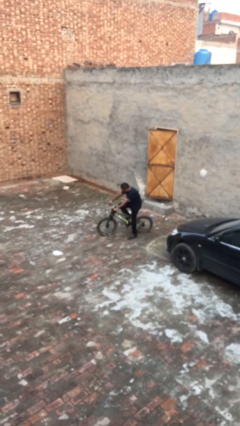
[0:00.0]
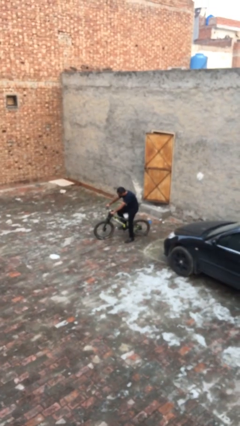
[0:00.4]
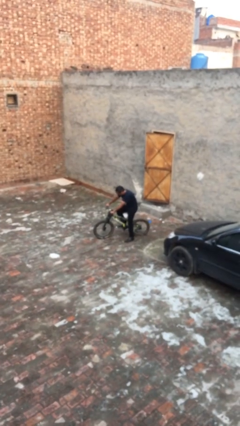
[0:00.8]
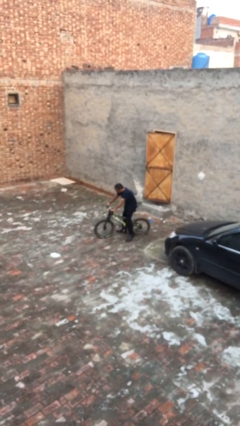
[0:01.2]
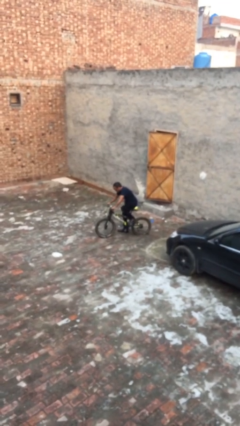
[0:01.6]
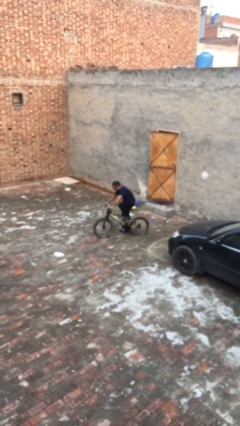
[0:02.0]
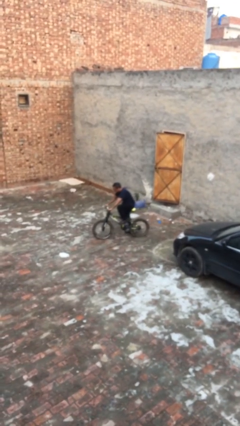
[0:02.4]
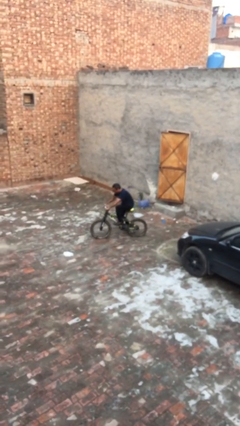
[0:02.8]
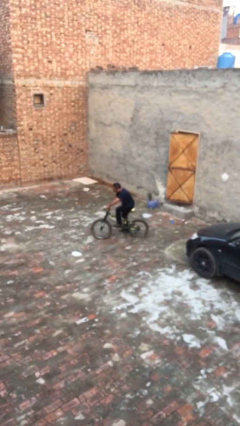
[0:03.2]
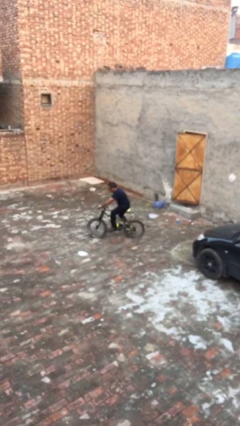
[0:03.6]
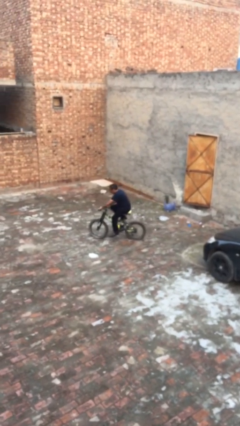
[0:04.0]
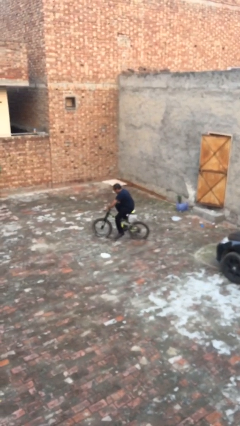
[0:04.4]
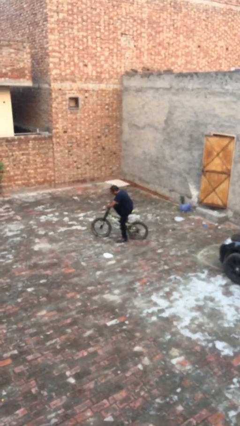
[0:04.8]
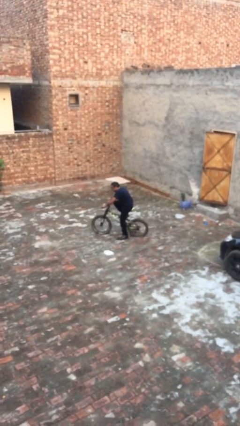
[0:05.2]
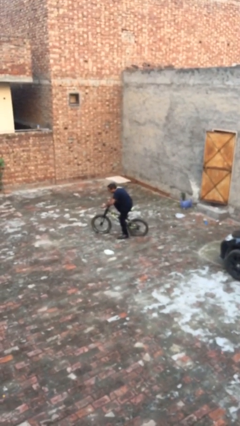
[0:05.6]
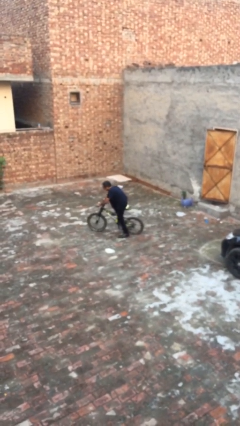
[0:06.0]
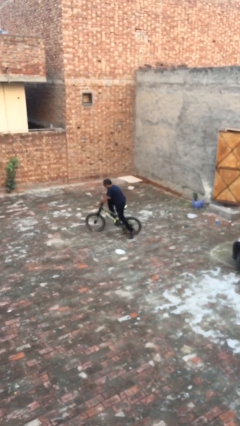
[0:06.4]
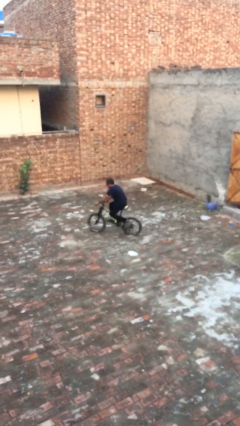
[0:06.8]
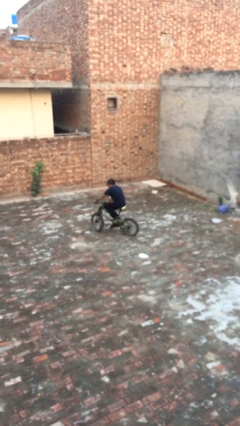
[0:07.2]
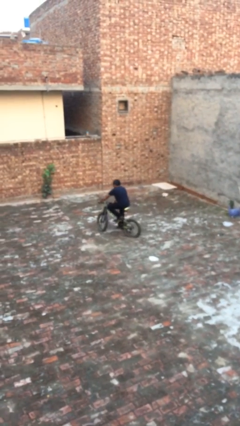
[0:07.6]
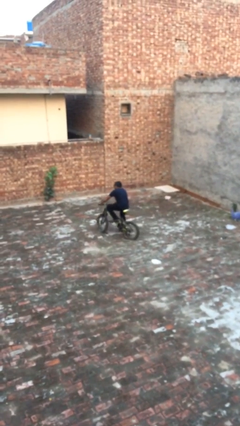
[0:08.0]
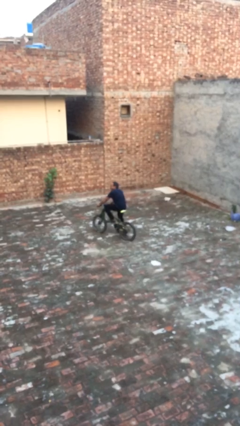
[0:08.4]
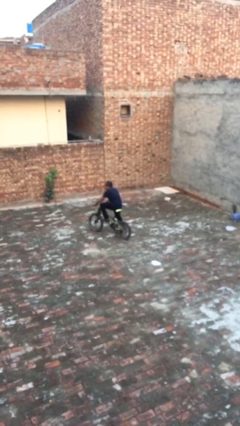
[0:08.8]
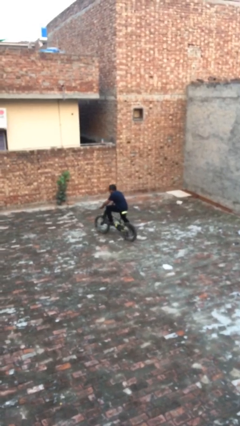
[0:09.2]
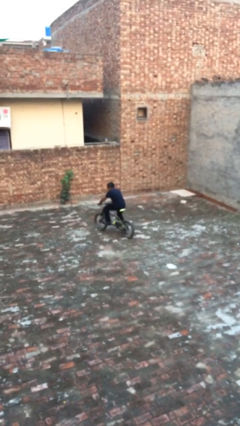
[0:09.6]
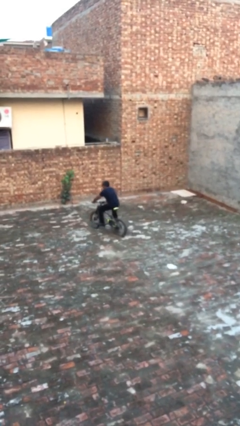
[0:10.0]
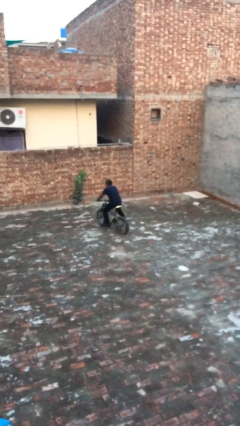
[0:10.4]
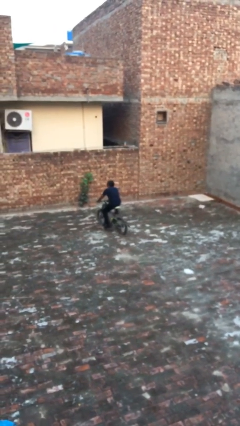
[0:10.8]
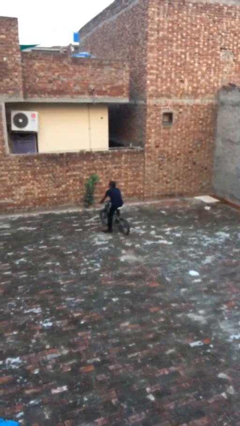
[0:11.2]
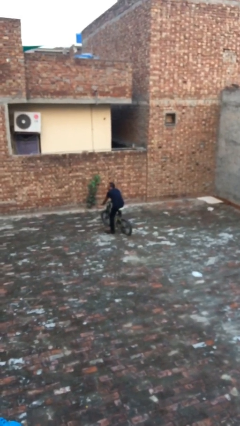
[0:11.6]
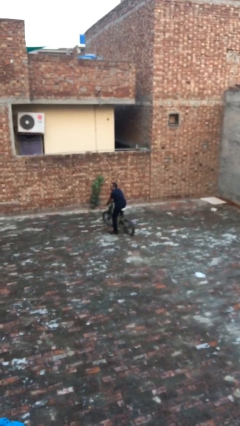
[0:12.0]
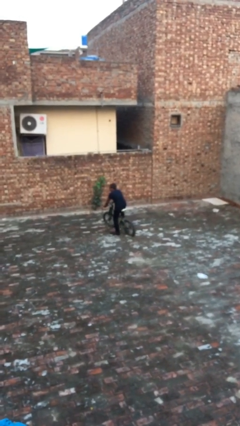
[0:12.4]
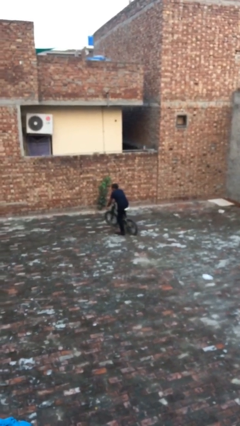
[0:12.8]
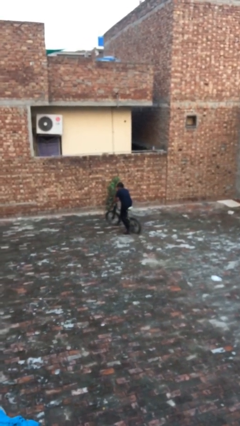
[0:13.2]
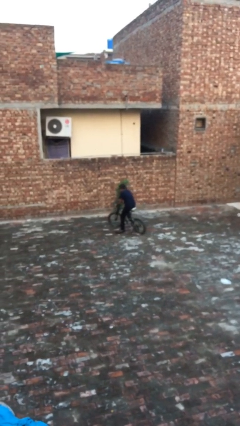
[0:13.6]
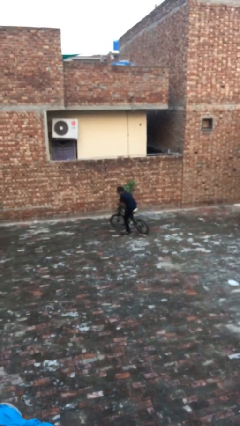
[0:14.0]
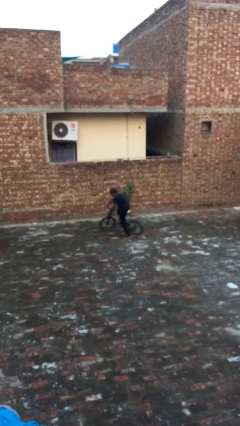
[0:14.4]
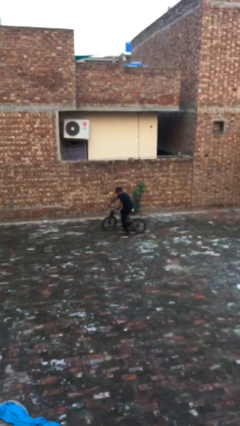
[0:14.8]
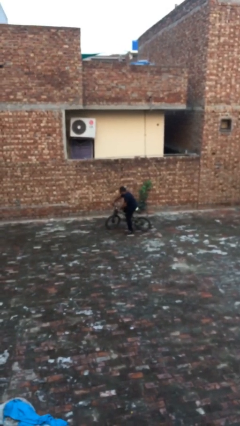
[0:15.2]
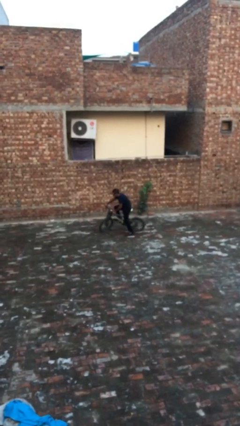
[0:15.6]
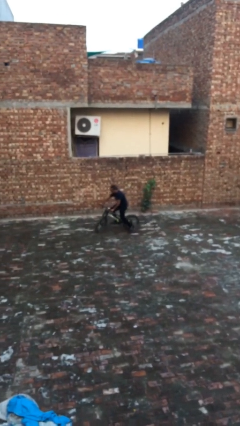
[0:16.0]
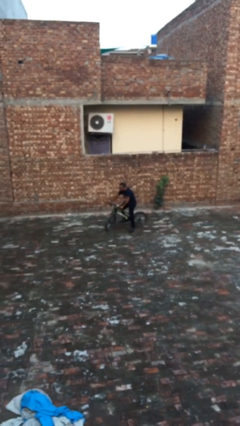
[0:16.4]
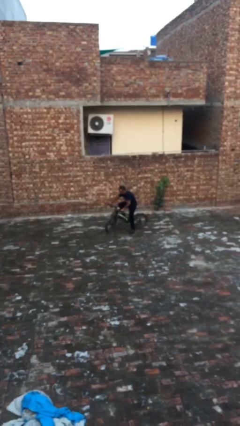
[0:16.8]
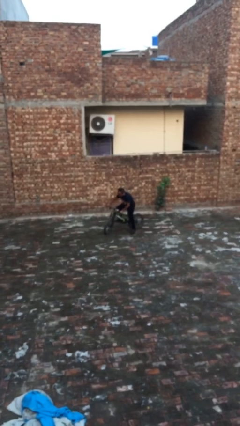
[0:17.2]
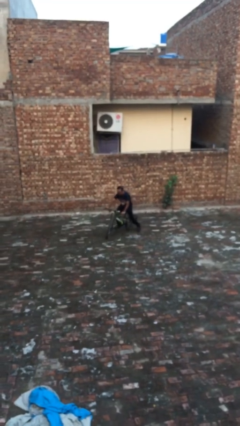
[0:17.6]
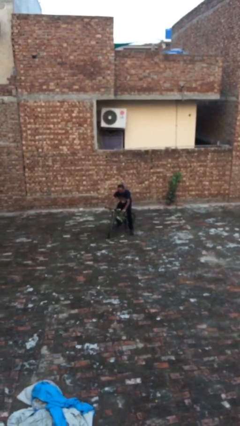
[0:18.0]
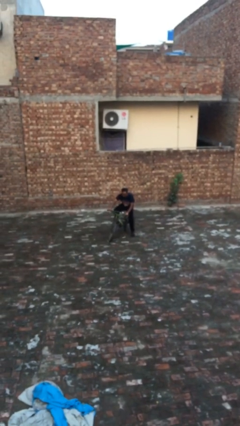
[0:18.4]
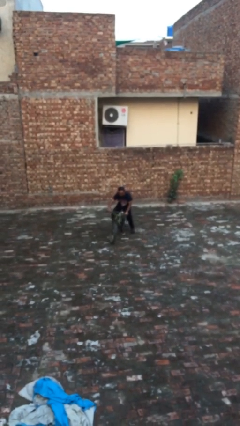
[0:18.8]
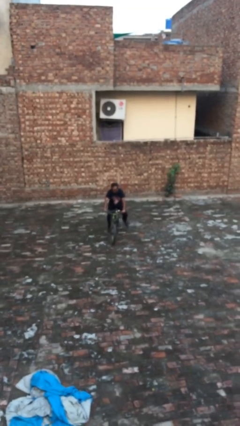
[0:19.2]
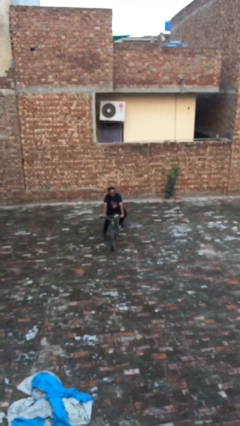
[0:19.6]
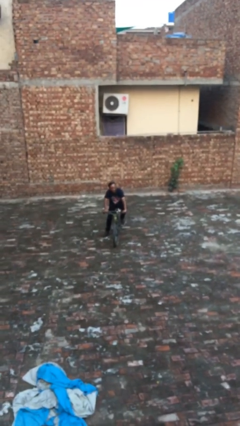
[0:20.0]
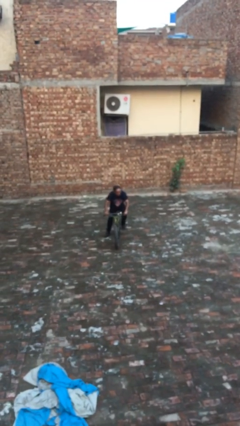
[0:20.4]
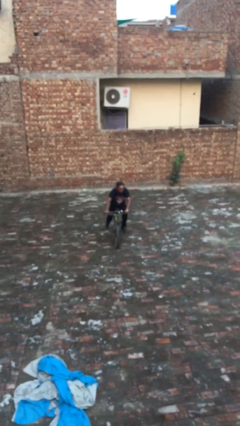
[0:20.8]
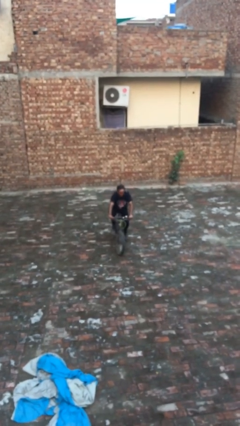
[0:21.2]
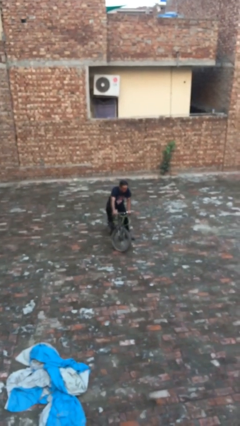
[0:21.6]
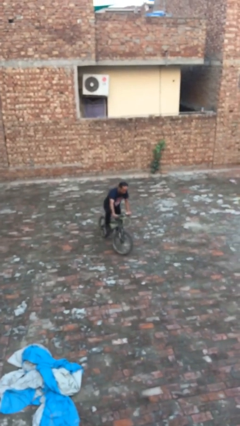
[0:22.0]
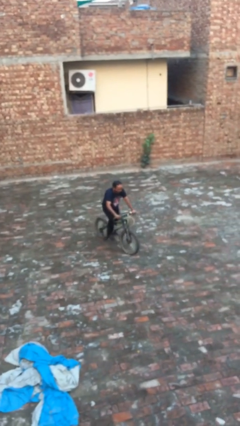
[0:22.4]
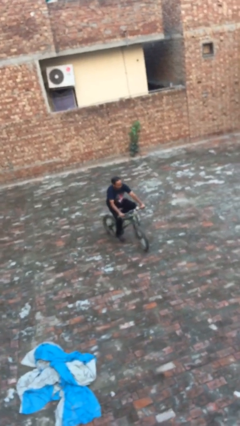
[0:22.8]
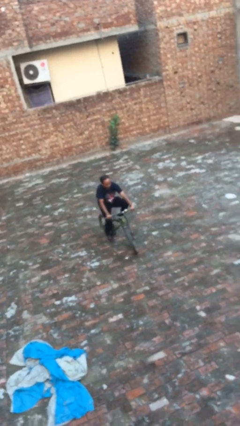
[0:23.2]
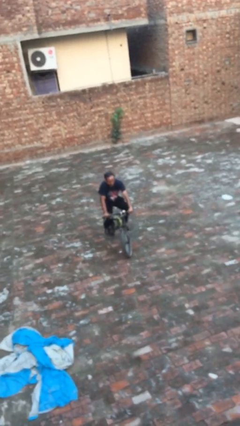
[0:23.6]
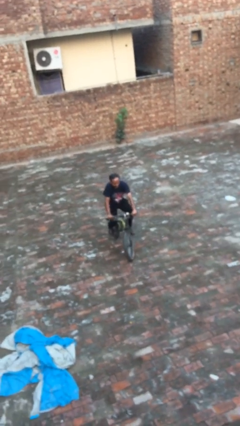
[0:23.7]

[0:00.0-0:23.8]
person rides bicycle

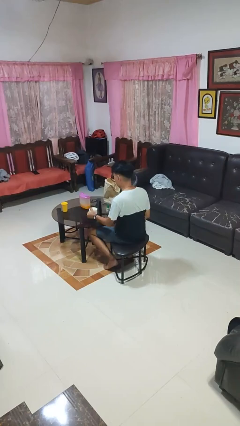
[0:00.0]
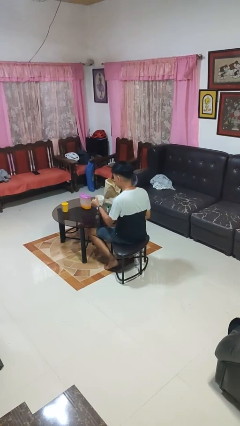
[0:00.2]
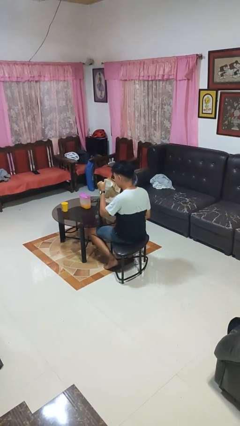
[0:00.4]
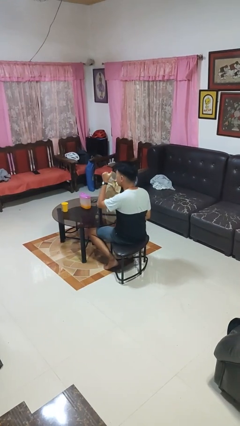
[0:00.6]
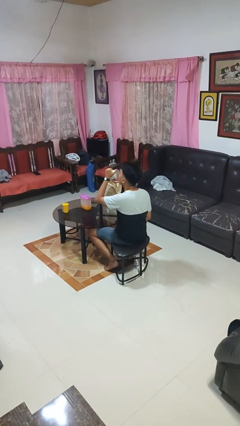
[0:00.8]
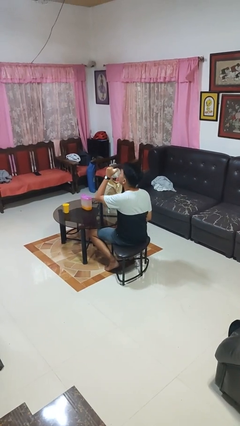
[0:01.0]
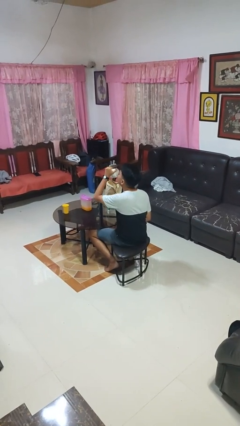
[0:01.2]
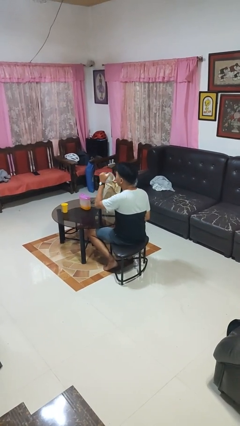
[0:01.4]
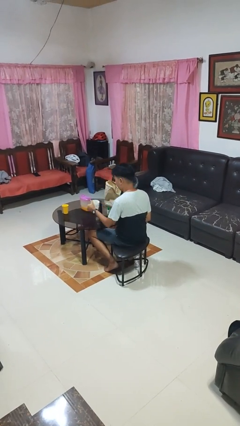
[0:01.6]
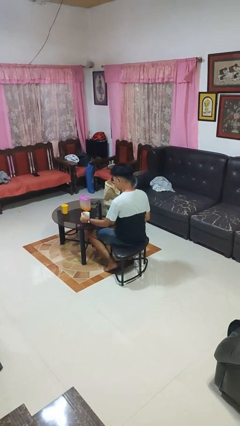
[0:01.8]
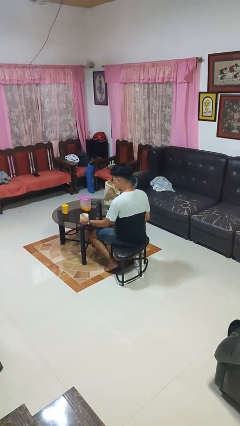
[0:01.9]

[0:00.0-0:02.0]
person drinks from mug

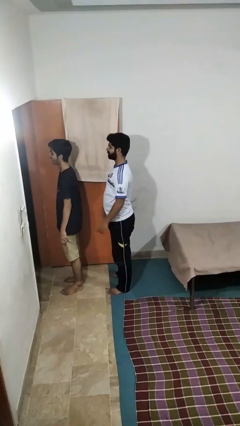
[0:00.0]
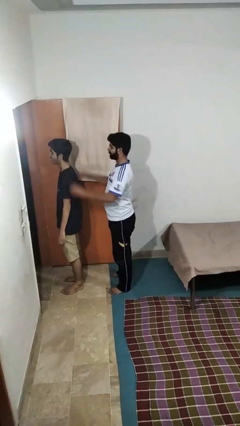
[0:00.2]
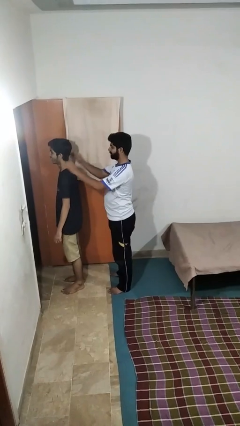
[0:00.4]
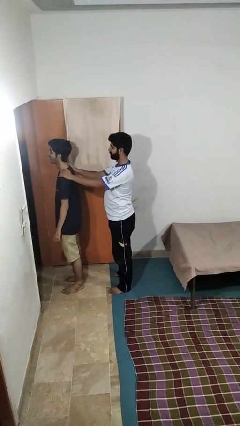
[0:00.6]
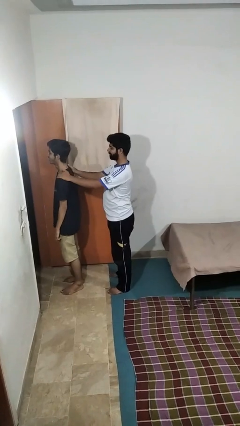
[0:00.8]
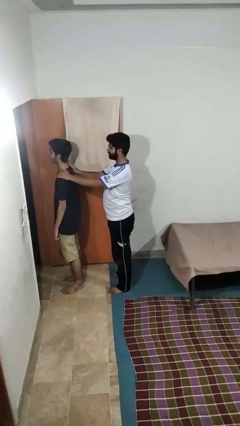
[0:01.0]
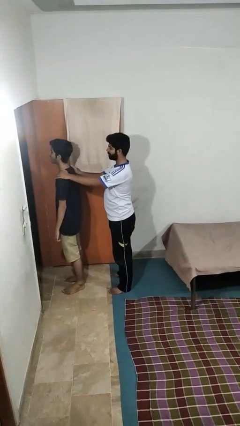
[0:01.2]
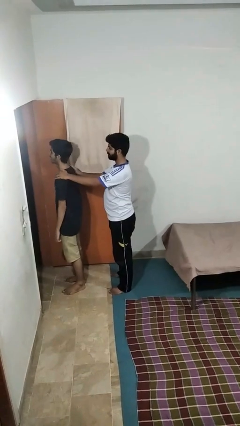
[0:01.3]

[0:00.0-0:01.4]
person grabs person by shoulder

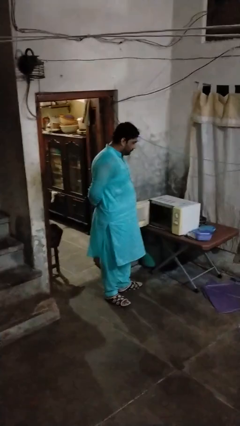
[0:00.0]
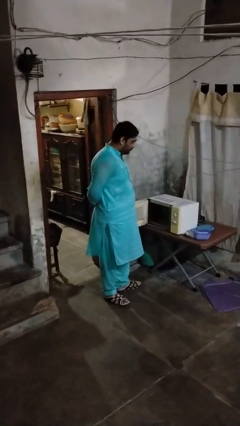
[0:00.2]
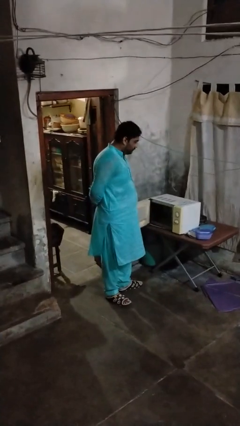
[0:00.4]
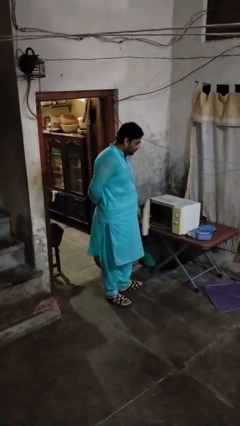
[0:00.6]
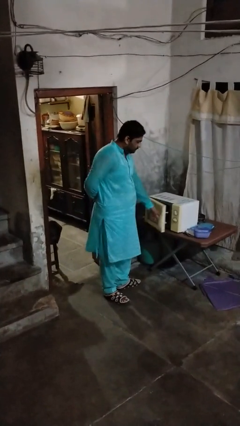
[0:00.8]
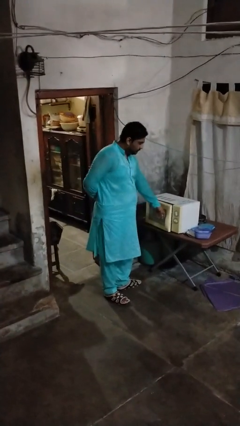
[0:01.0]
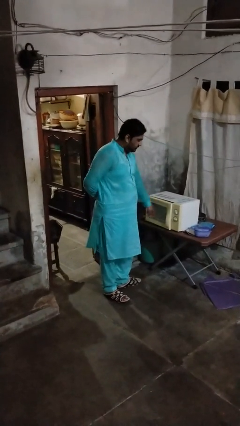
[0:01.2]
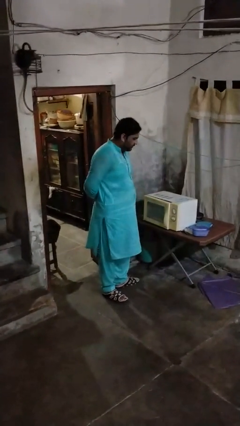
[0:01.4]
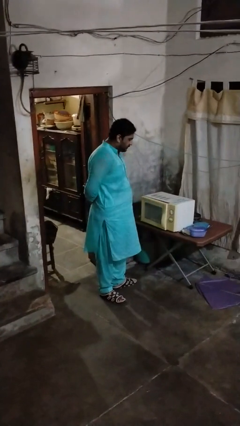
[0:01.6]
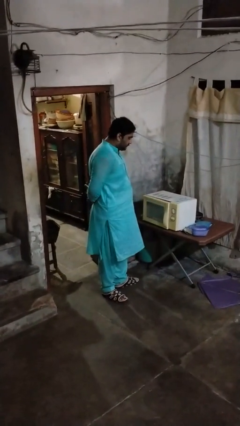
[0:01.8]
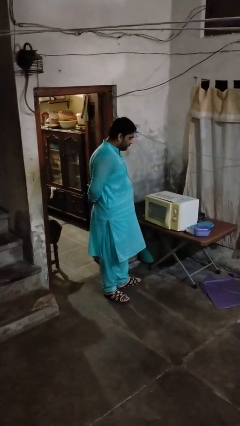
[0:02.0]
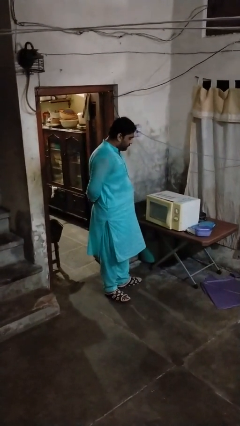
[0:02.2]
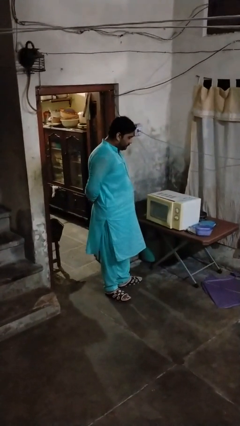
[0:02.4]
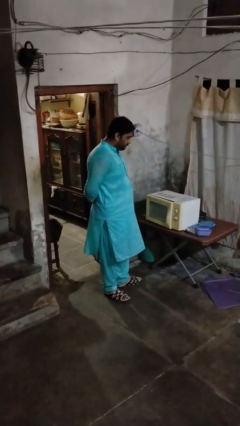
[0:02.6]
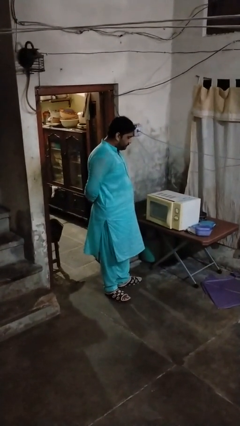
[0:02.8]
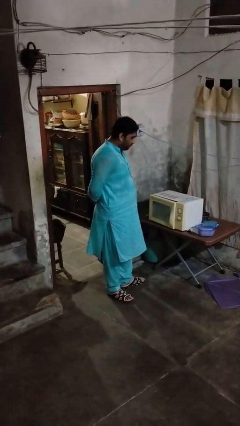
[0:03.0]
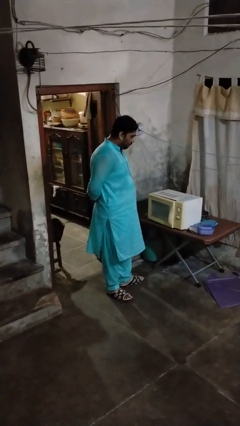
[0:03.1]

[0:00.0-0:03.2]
person closes microwave
